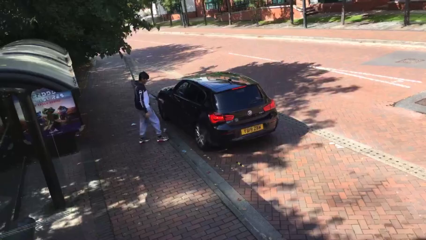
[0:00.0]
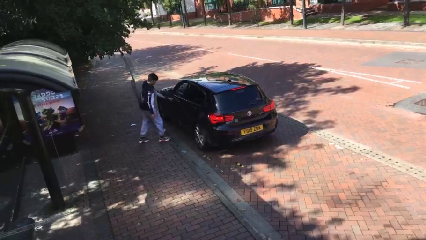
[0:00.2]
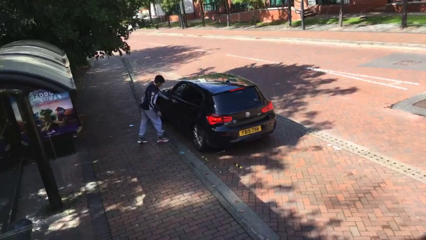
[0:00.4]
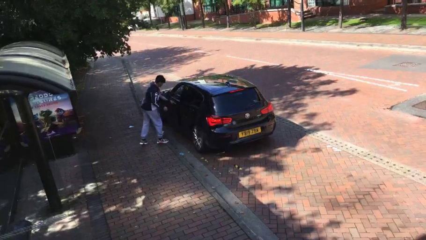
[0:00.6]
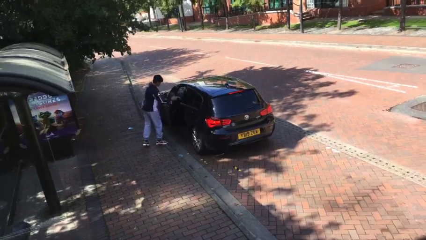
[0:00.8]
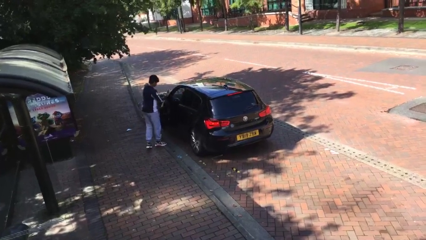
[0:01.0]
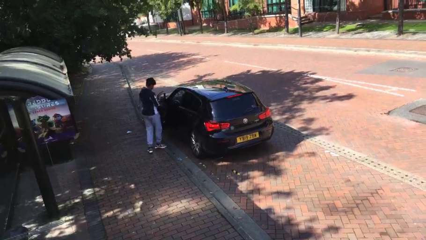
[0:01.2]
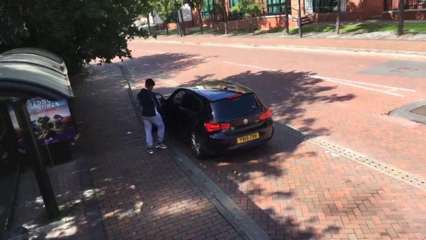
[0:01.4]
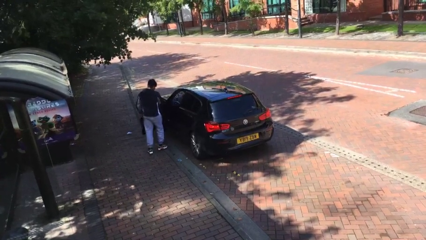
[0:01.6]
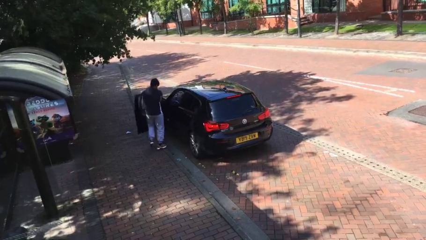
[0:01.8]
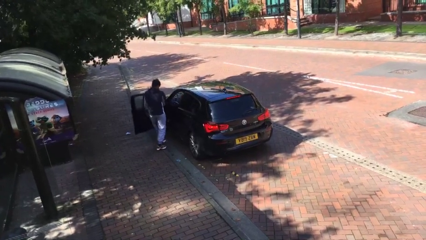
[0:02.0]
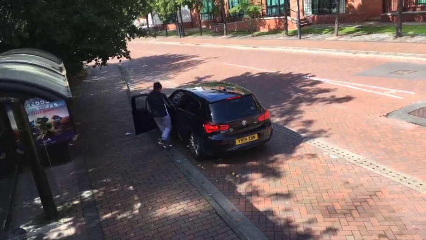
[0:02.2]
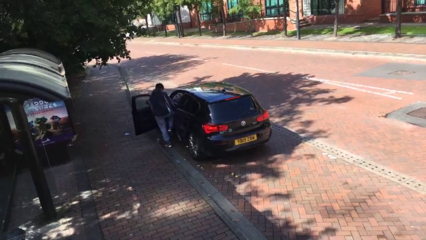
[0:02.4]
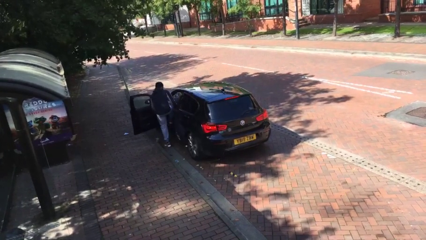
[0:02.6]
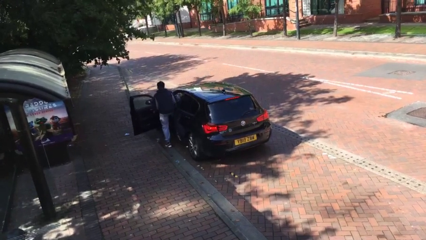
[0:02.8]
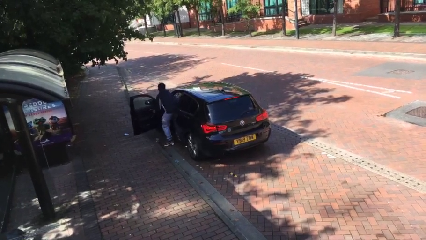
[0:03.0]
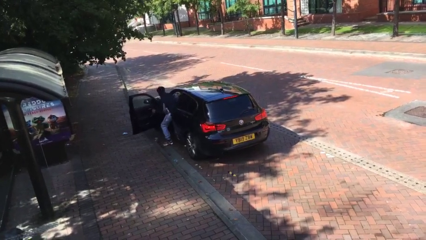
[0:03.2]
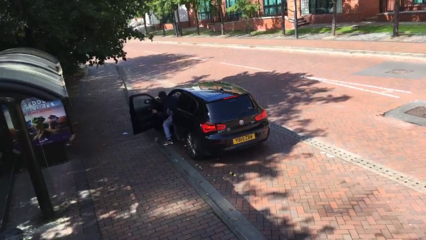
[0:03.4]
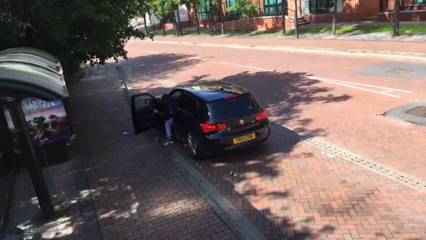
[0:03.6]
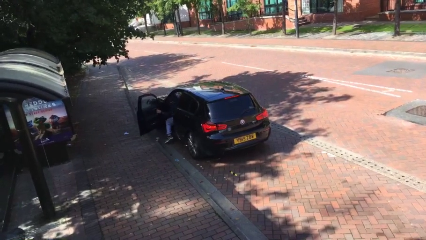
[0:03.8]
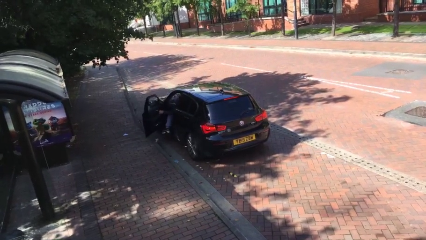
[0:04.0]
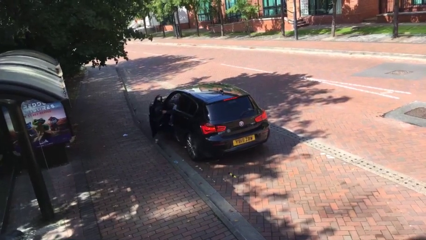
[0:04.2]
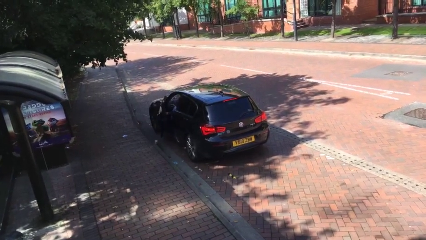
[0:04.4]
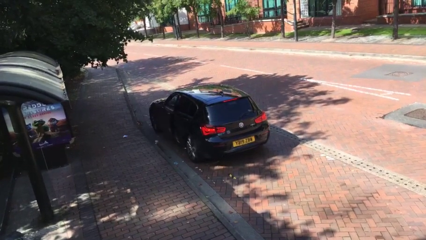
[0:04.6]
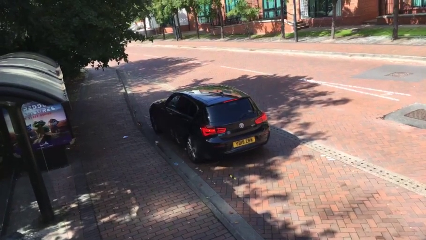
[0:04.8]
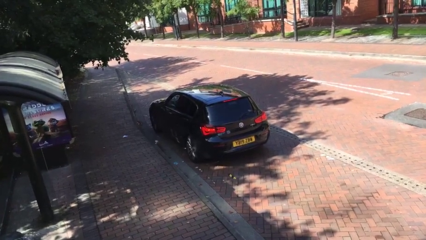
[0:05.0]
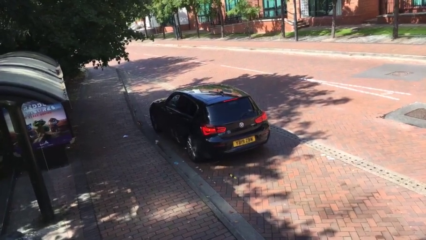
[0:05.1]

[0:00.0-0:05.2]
car picks up person

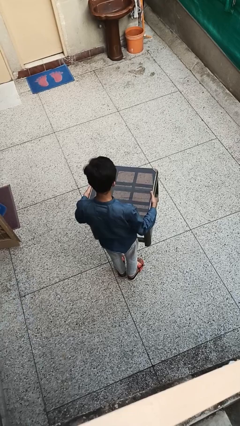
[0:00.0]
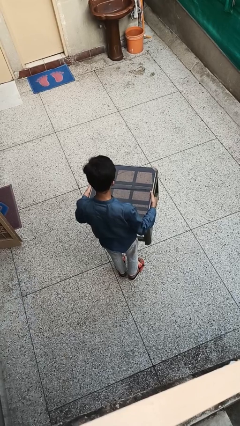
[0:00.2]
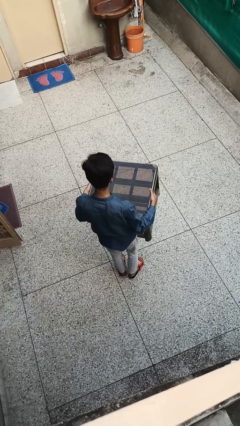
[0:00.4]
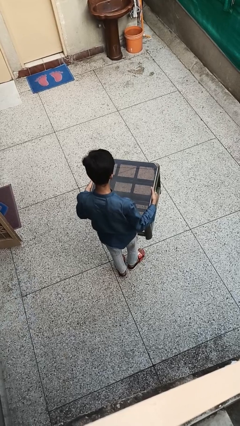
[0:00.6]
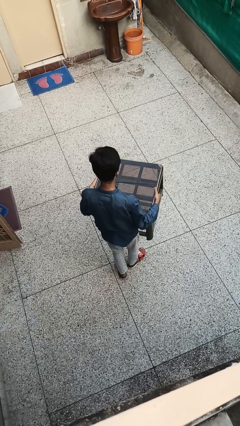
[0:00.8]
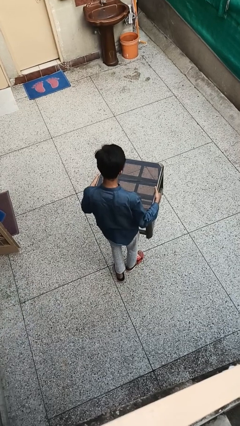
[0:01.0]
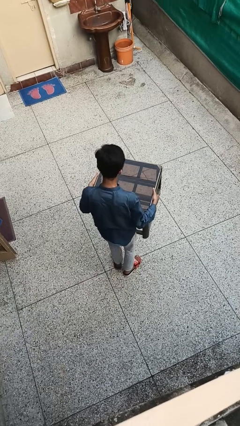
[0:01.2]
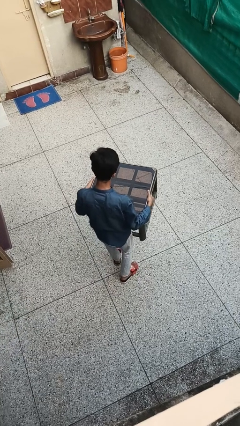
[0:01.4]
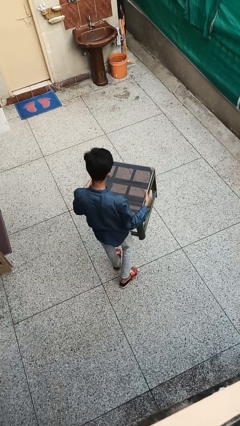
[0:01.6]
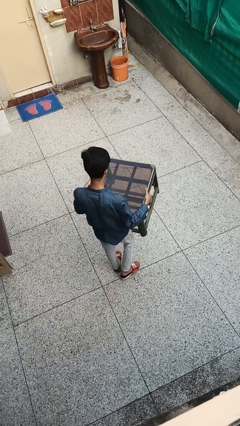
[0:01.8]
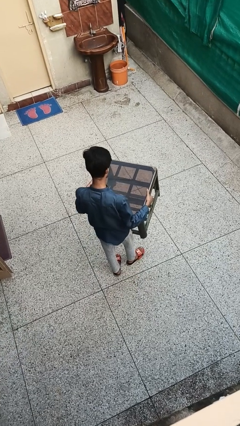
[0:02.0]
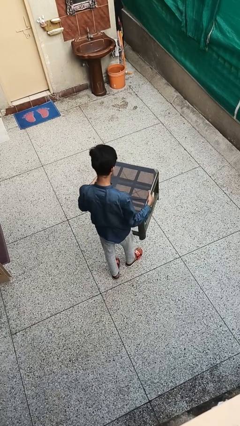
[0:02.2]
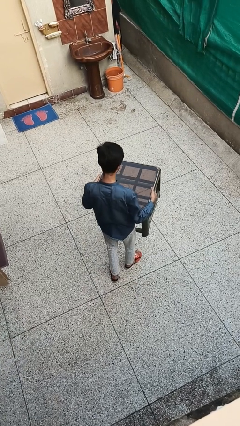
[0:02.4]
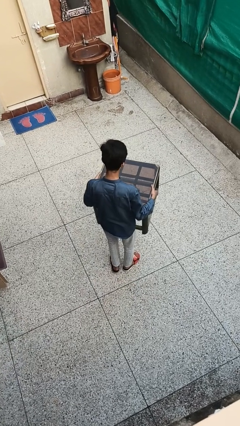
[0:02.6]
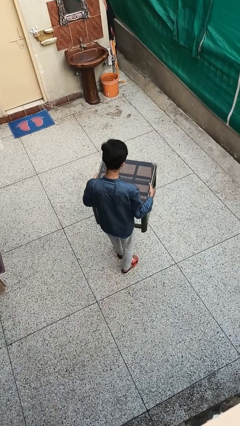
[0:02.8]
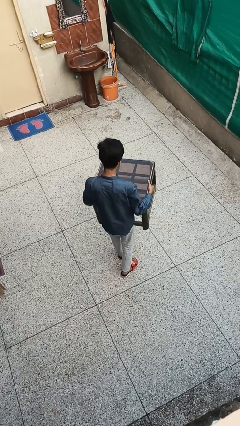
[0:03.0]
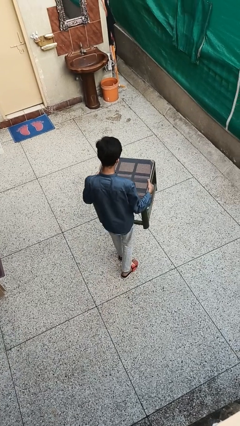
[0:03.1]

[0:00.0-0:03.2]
person carries furniture

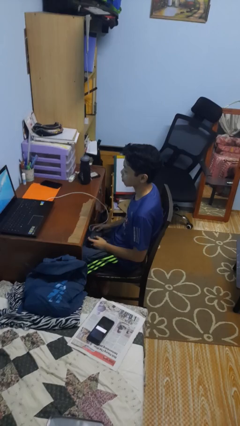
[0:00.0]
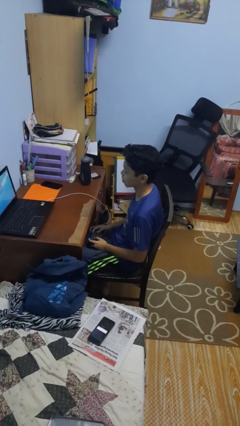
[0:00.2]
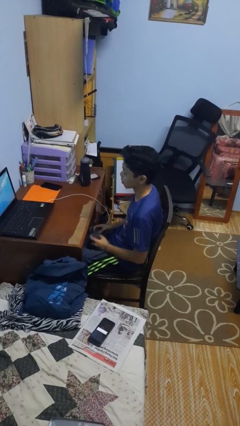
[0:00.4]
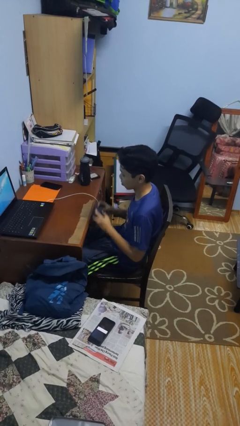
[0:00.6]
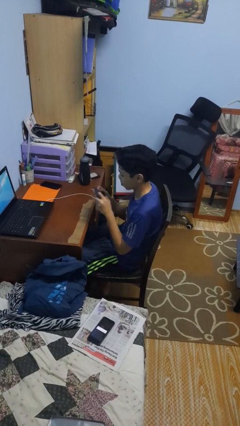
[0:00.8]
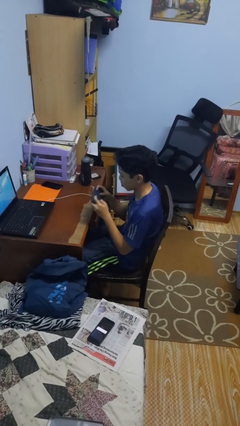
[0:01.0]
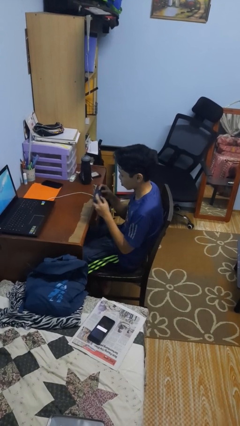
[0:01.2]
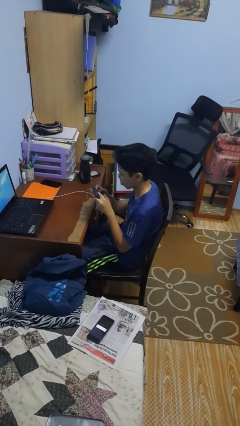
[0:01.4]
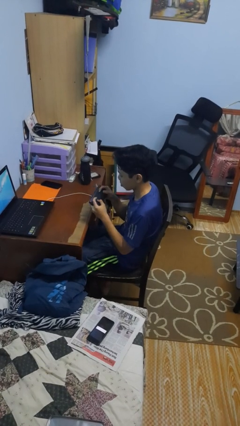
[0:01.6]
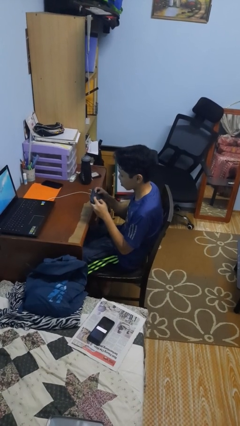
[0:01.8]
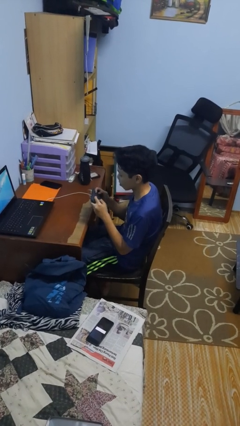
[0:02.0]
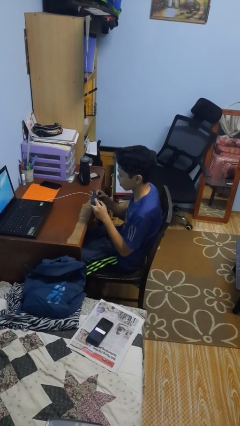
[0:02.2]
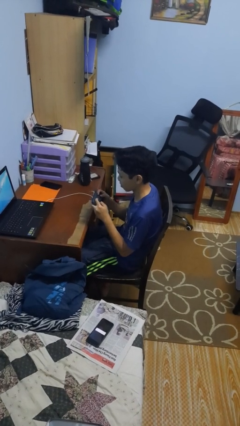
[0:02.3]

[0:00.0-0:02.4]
person interacts with handheld game

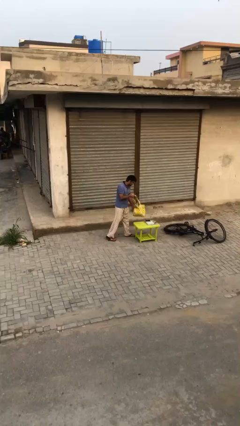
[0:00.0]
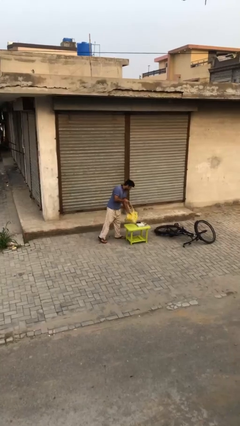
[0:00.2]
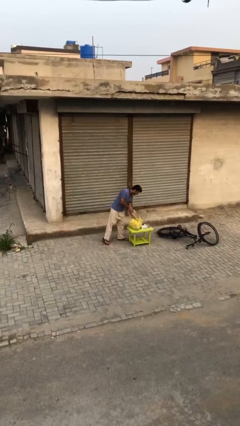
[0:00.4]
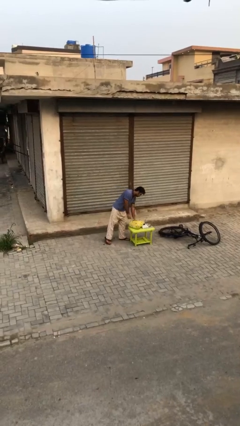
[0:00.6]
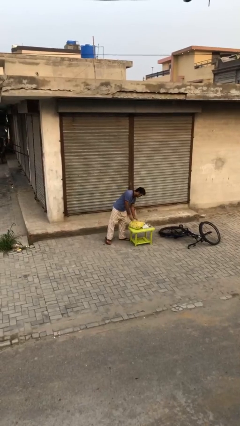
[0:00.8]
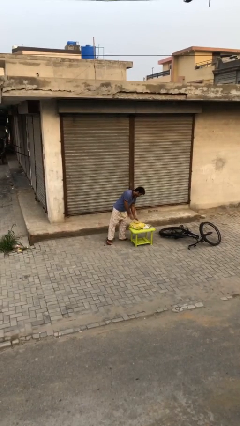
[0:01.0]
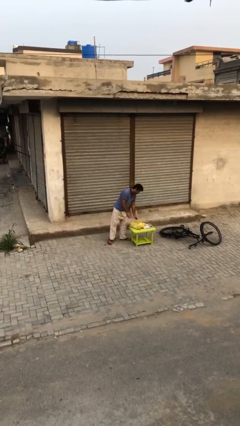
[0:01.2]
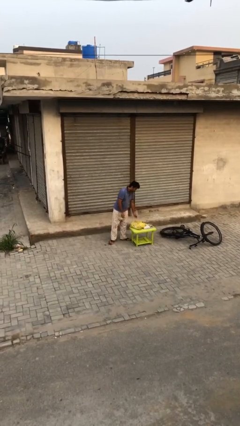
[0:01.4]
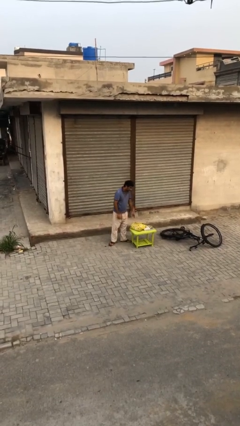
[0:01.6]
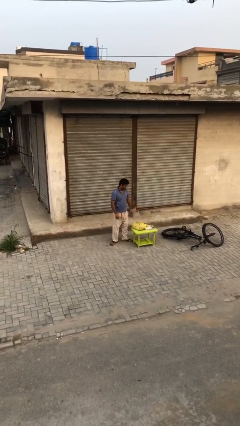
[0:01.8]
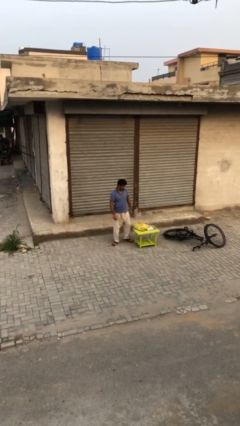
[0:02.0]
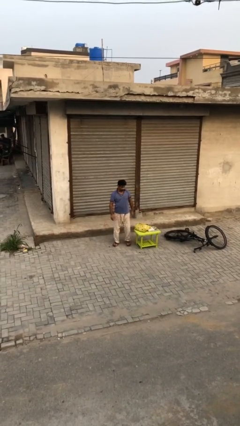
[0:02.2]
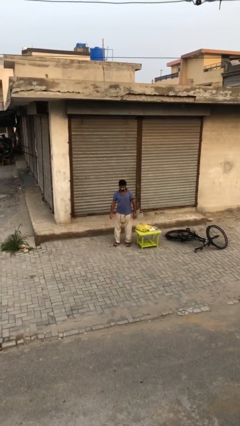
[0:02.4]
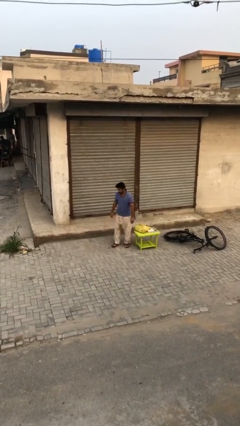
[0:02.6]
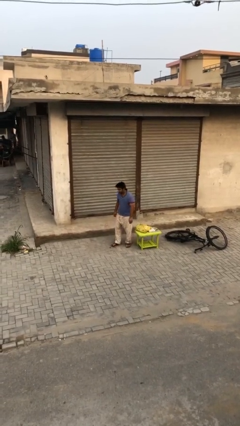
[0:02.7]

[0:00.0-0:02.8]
person puts down object on table

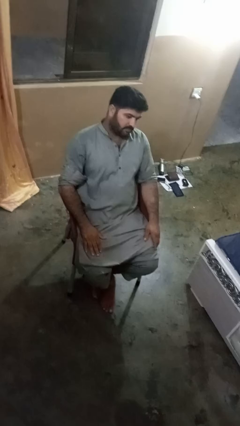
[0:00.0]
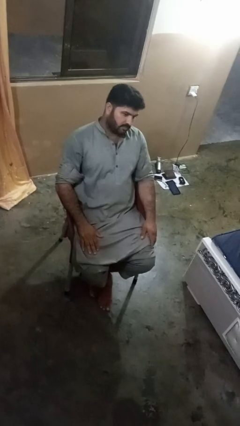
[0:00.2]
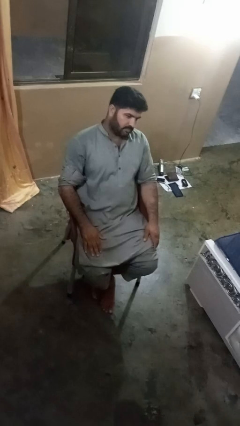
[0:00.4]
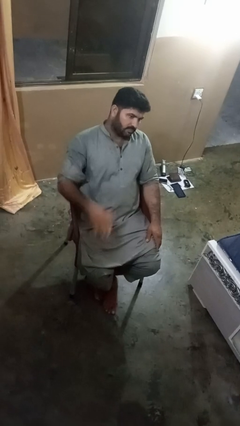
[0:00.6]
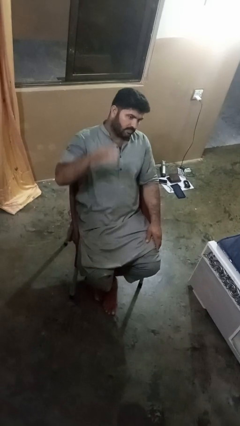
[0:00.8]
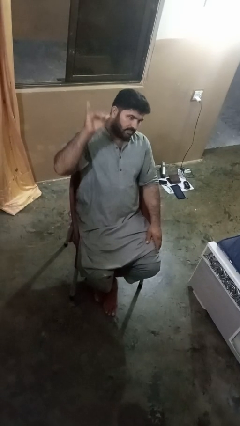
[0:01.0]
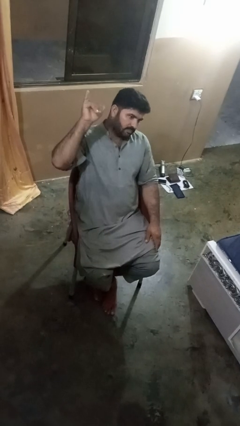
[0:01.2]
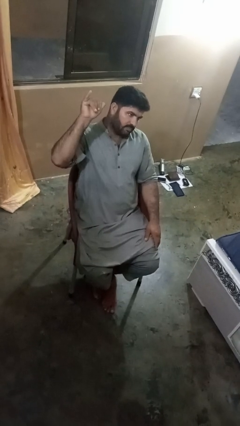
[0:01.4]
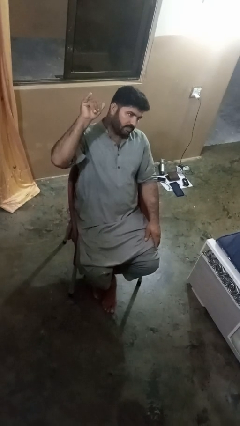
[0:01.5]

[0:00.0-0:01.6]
person gestures hang loose

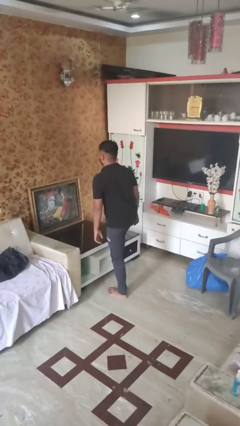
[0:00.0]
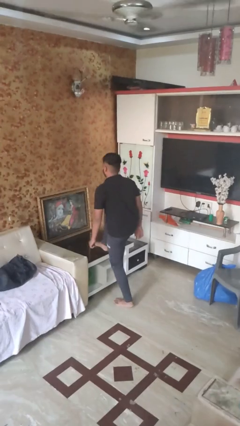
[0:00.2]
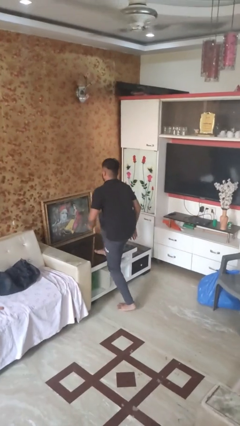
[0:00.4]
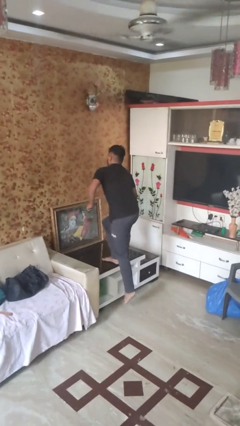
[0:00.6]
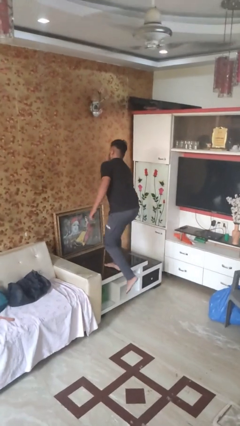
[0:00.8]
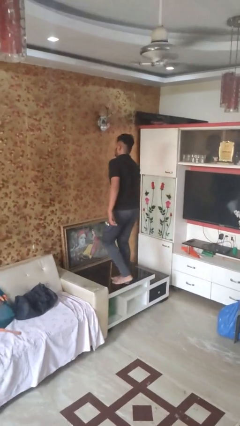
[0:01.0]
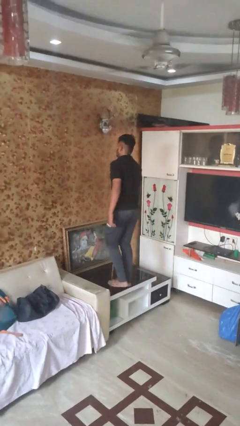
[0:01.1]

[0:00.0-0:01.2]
person climbs on table

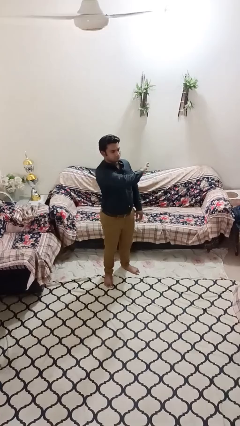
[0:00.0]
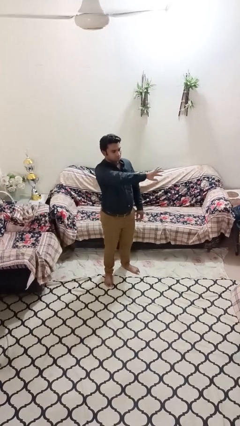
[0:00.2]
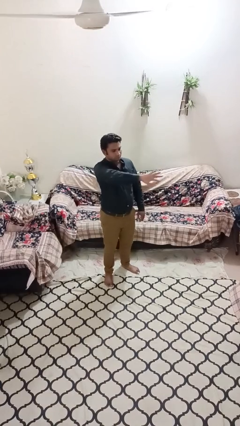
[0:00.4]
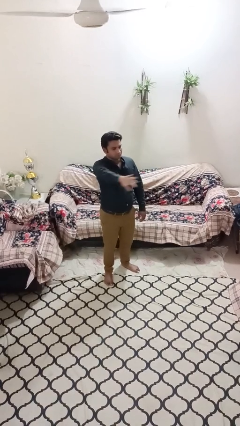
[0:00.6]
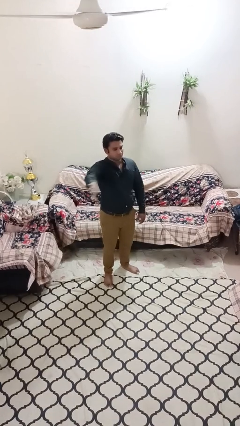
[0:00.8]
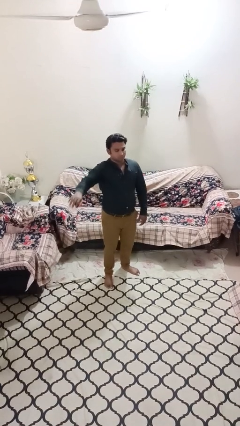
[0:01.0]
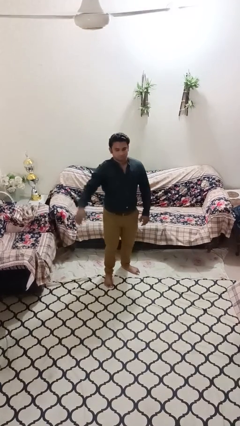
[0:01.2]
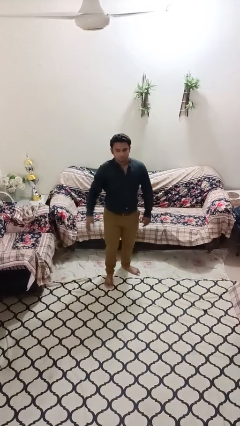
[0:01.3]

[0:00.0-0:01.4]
person gestures swipe right
